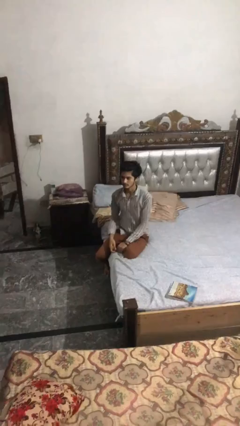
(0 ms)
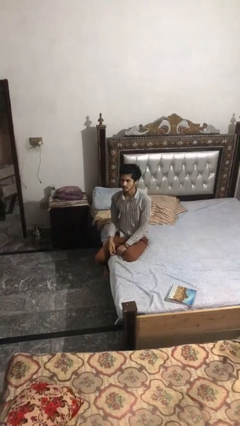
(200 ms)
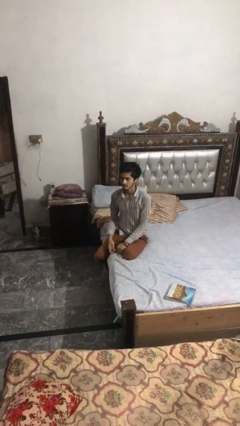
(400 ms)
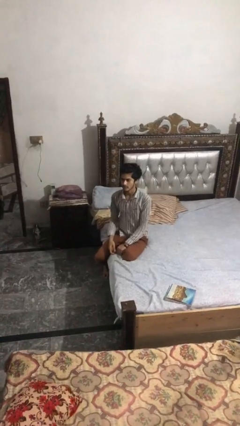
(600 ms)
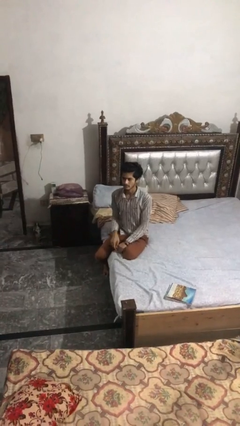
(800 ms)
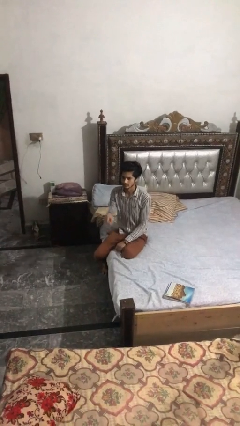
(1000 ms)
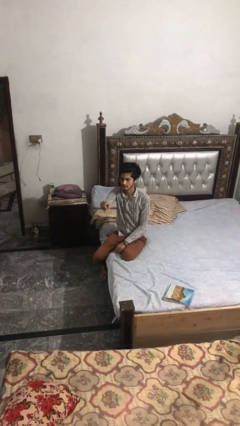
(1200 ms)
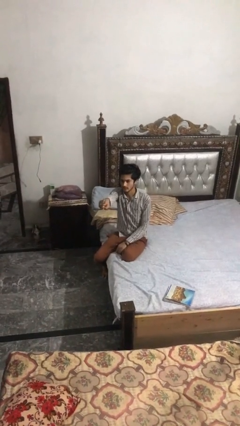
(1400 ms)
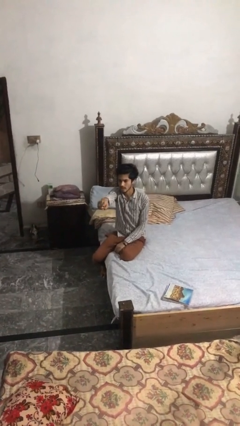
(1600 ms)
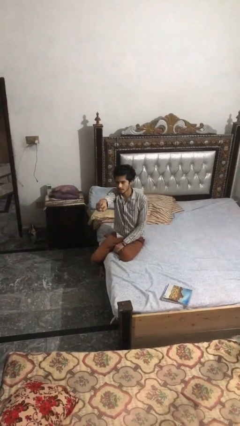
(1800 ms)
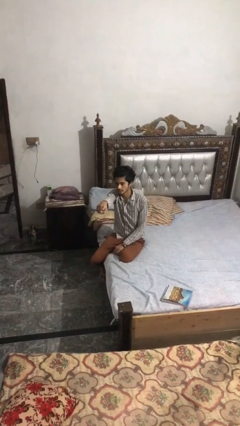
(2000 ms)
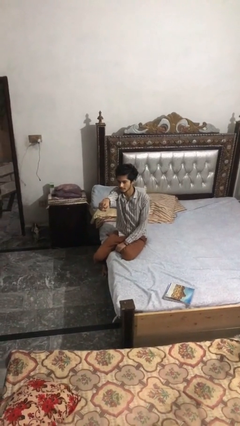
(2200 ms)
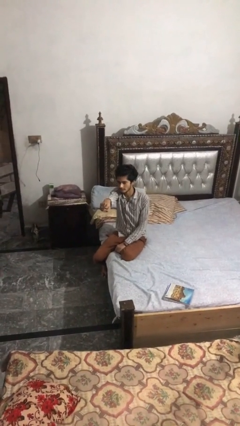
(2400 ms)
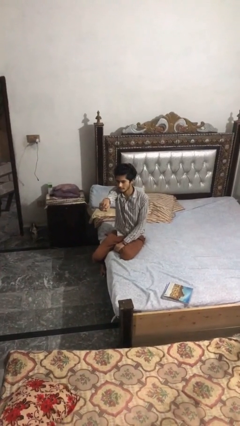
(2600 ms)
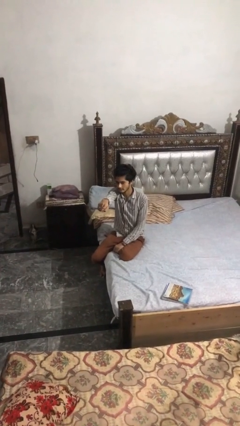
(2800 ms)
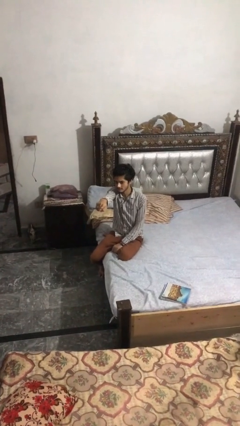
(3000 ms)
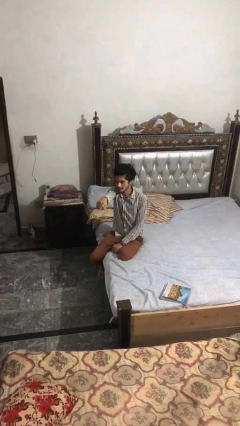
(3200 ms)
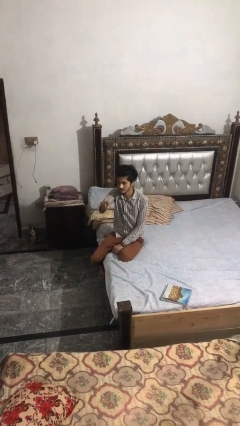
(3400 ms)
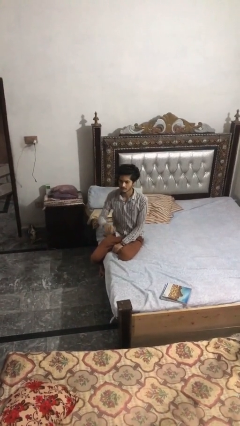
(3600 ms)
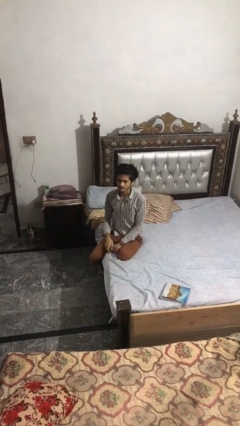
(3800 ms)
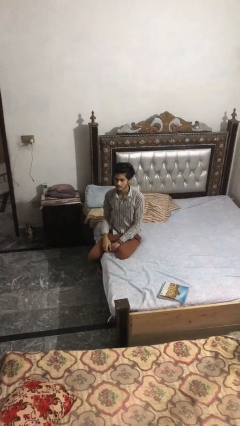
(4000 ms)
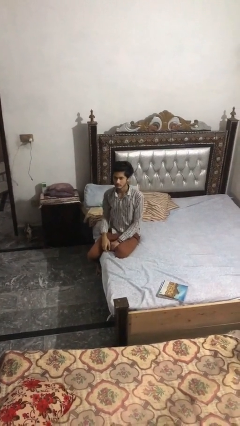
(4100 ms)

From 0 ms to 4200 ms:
person points at person

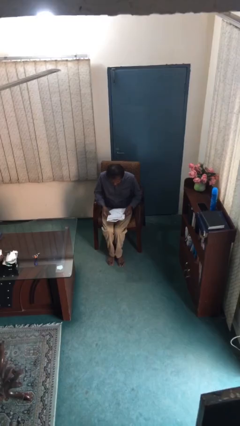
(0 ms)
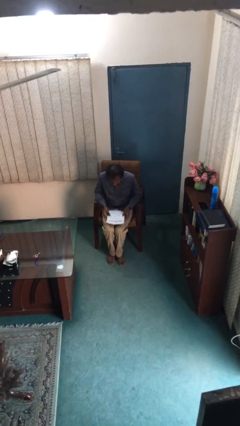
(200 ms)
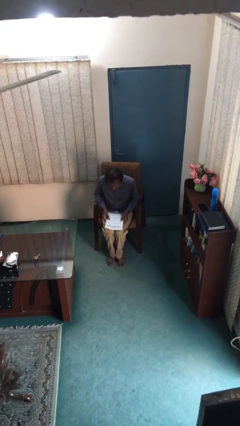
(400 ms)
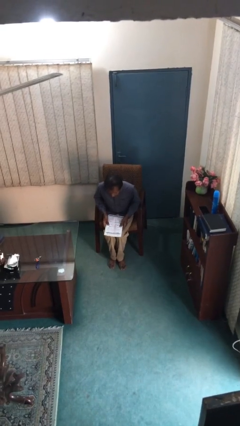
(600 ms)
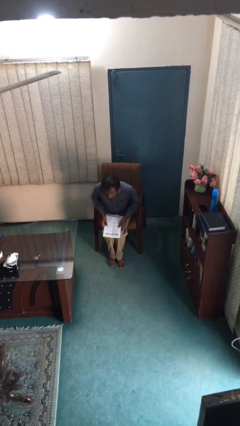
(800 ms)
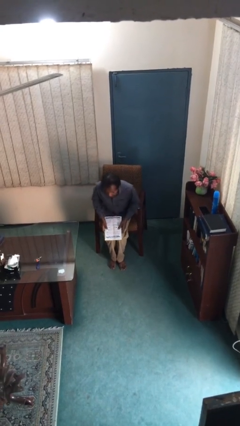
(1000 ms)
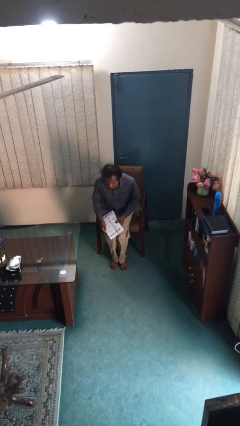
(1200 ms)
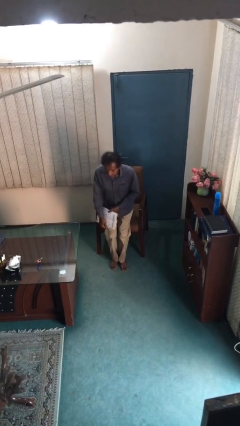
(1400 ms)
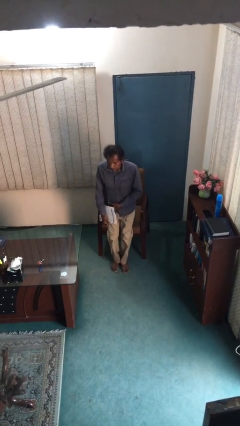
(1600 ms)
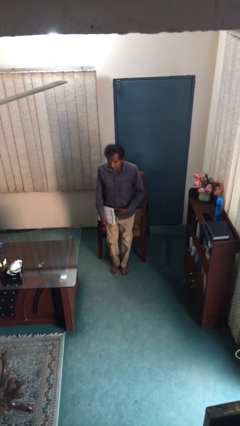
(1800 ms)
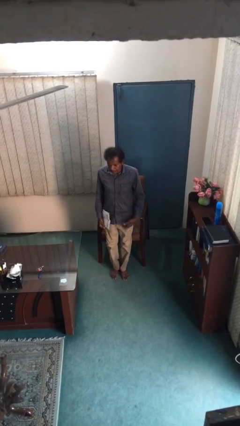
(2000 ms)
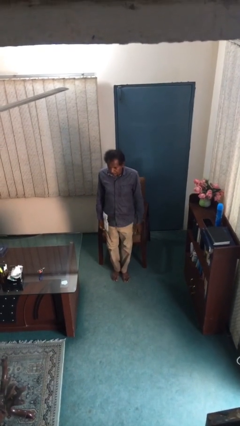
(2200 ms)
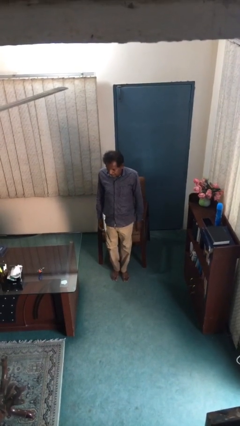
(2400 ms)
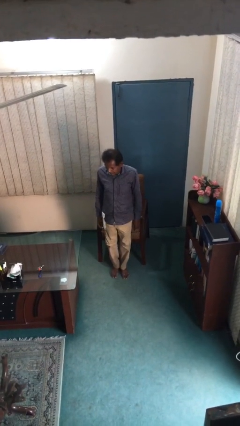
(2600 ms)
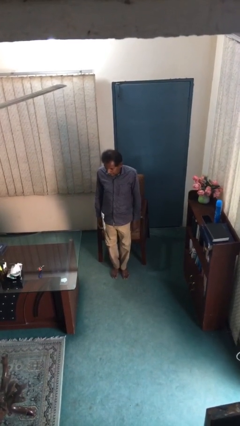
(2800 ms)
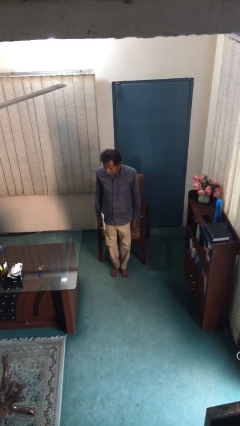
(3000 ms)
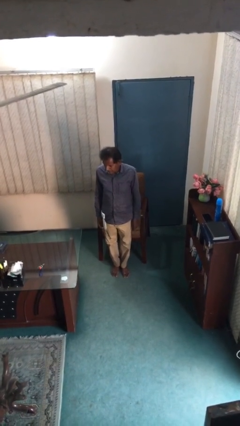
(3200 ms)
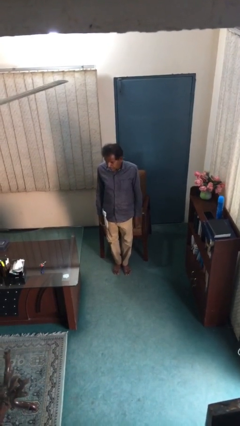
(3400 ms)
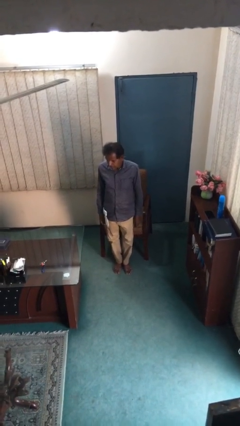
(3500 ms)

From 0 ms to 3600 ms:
person stands up

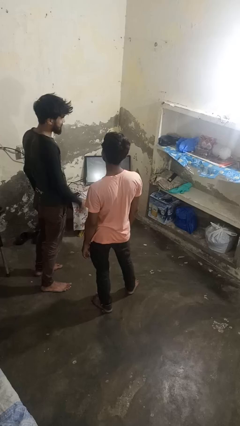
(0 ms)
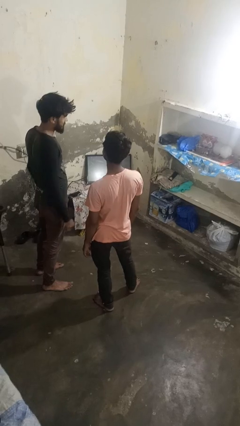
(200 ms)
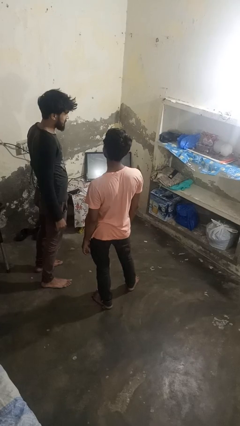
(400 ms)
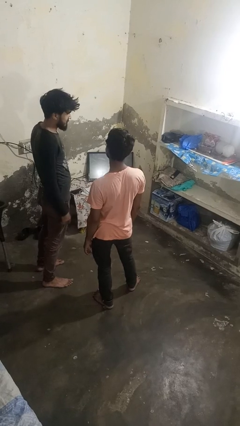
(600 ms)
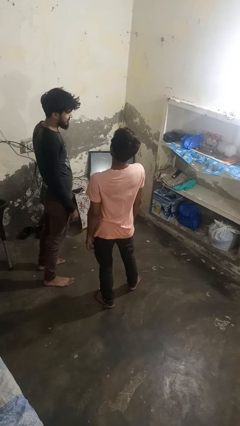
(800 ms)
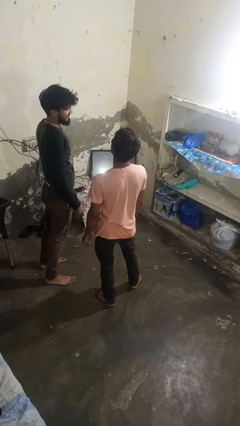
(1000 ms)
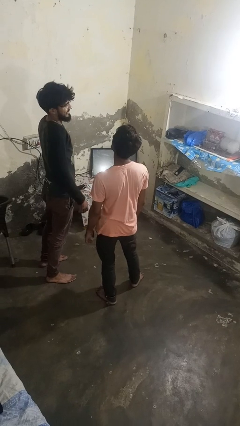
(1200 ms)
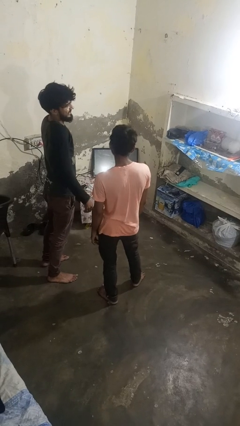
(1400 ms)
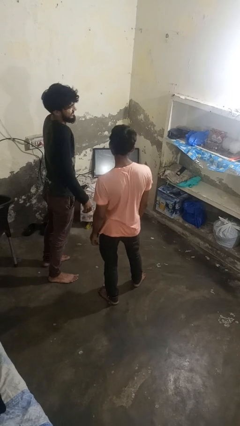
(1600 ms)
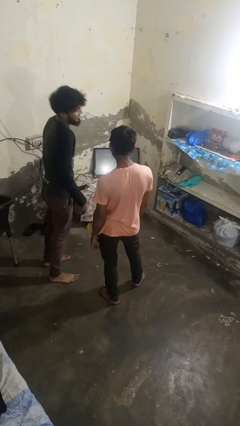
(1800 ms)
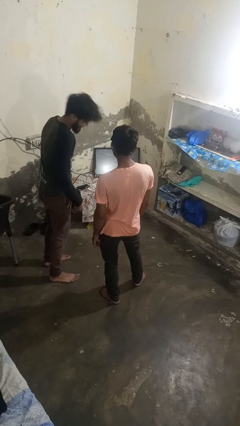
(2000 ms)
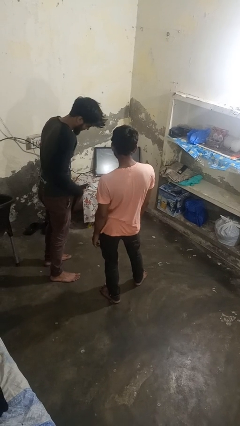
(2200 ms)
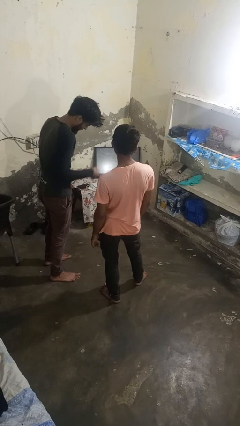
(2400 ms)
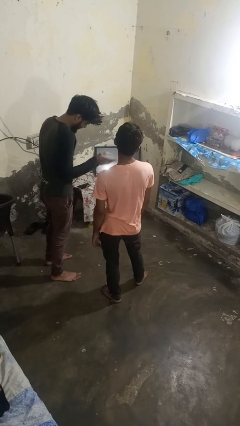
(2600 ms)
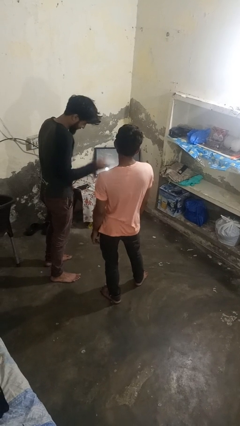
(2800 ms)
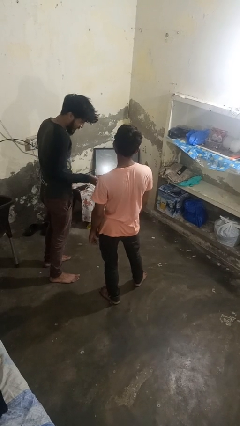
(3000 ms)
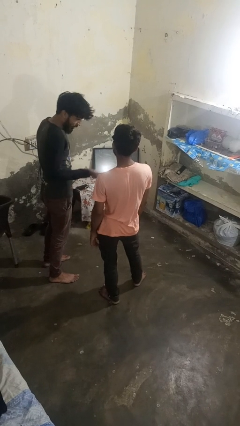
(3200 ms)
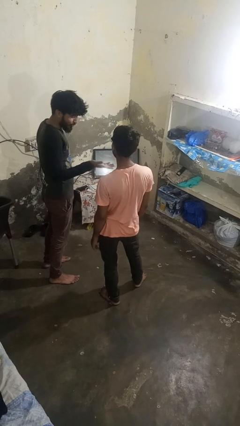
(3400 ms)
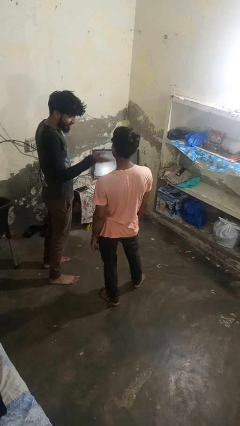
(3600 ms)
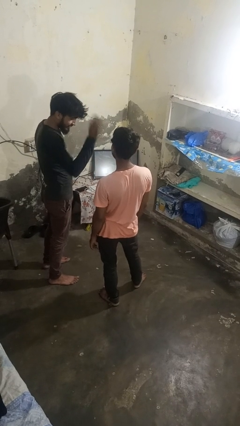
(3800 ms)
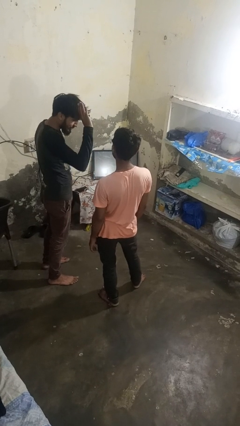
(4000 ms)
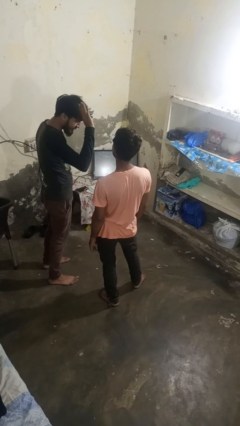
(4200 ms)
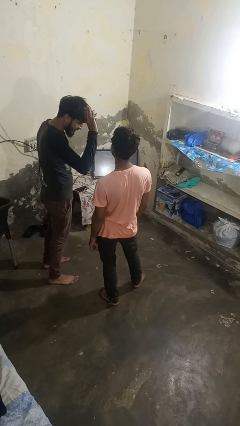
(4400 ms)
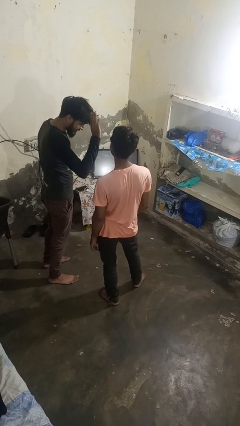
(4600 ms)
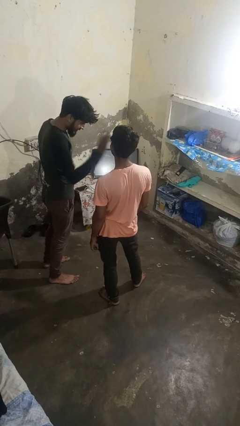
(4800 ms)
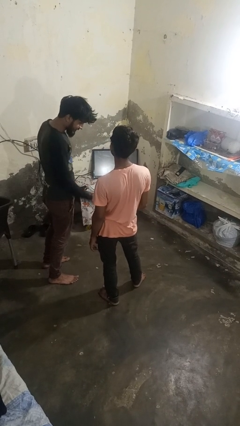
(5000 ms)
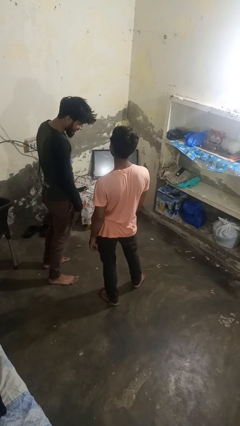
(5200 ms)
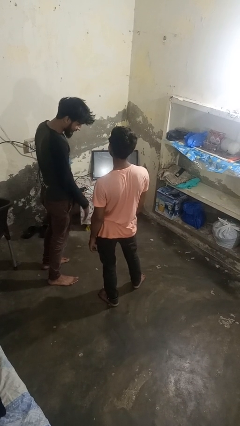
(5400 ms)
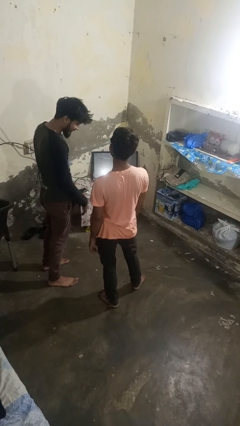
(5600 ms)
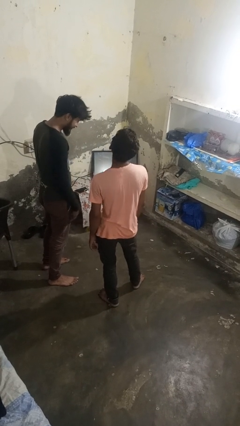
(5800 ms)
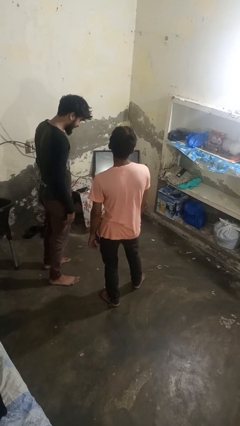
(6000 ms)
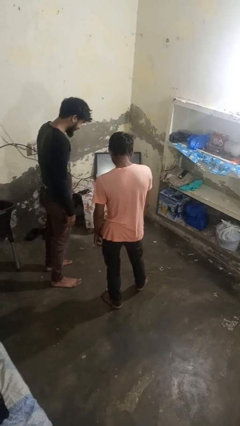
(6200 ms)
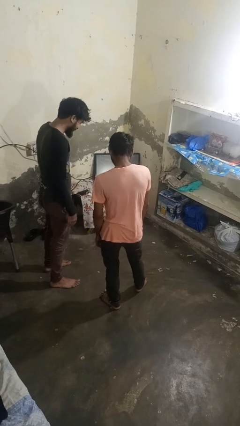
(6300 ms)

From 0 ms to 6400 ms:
person laughs with person

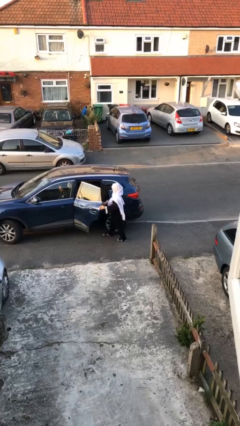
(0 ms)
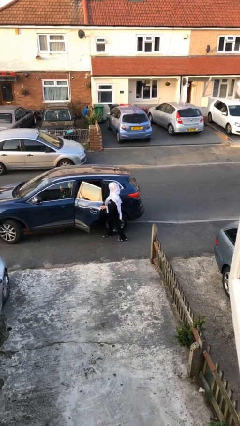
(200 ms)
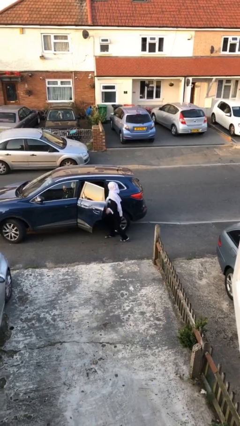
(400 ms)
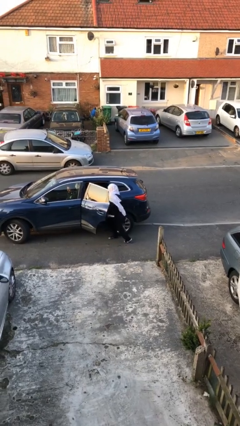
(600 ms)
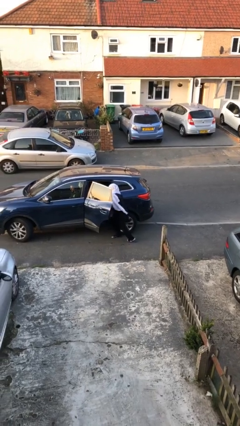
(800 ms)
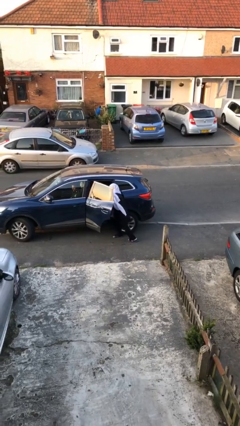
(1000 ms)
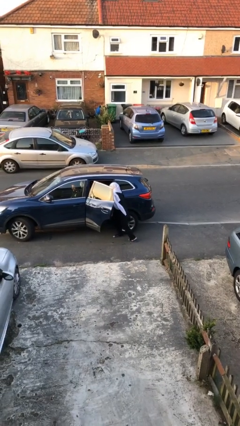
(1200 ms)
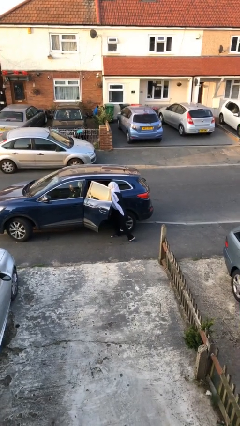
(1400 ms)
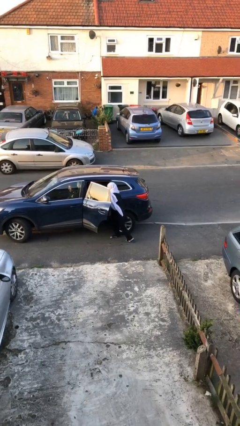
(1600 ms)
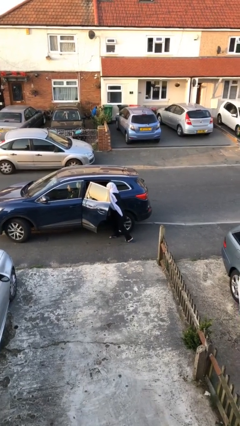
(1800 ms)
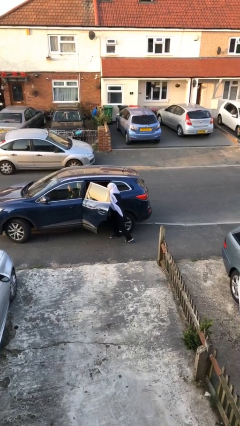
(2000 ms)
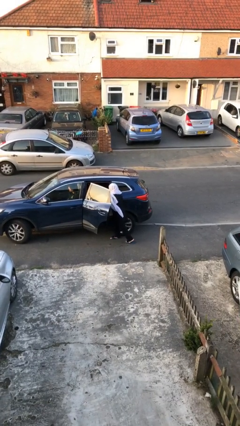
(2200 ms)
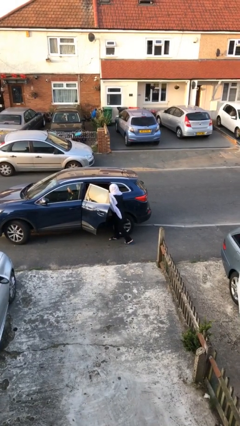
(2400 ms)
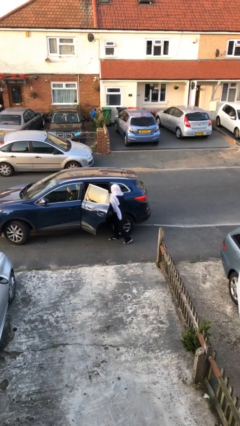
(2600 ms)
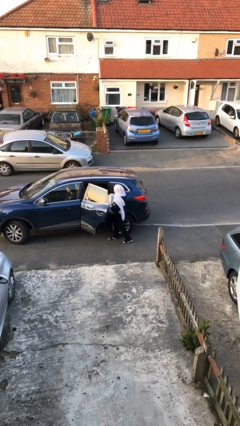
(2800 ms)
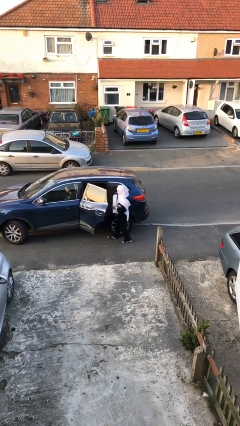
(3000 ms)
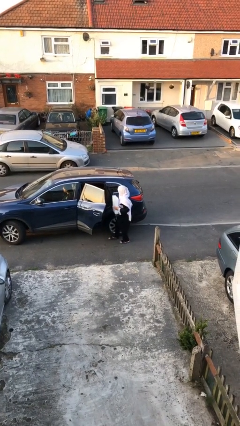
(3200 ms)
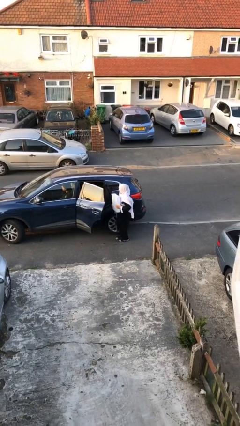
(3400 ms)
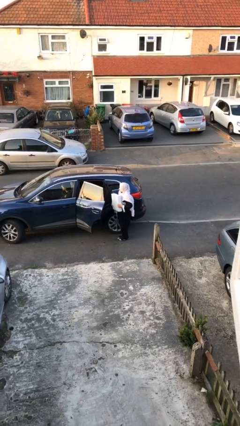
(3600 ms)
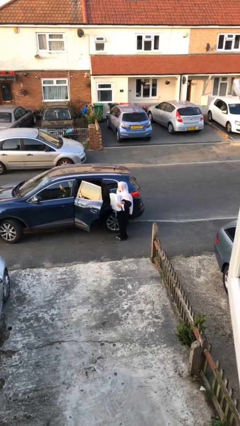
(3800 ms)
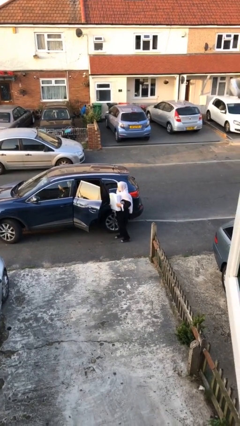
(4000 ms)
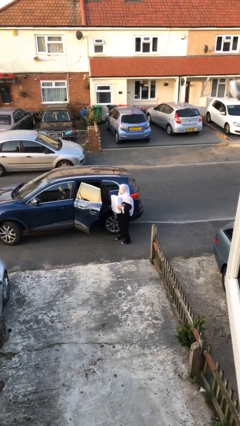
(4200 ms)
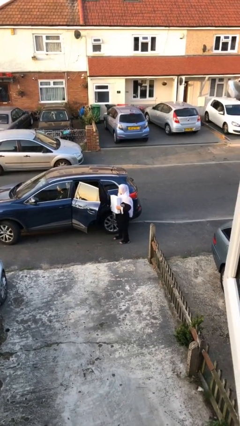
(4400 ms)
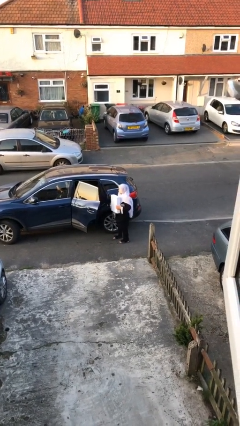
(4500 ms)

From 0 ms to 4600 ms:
person unloads car
